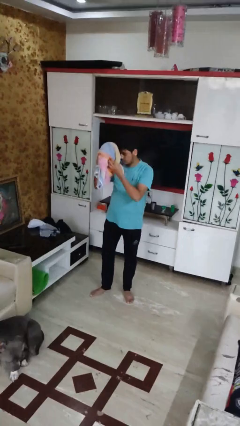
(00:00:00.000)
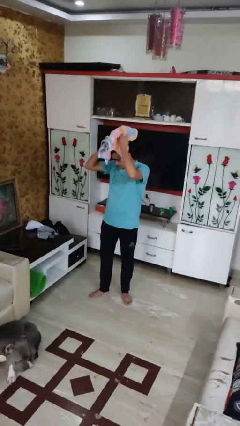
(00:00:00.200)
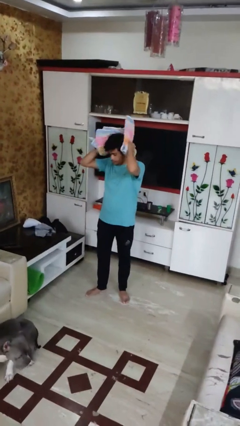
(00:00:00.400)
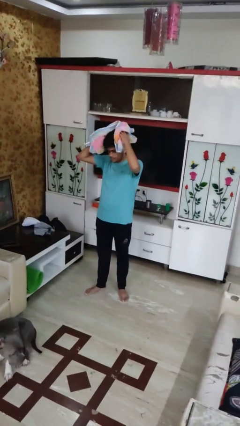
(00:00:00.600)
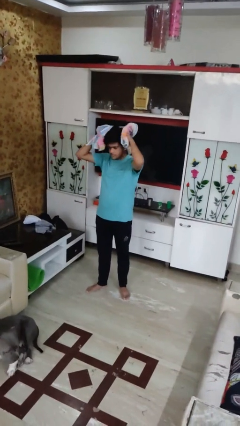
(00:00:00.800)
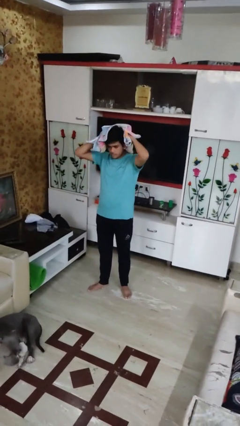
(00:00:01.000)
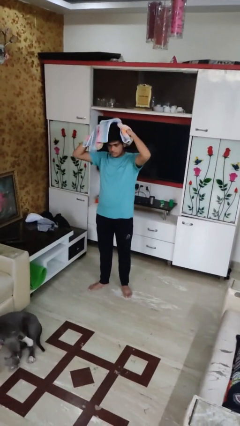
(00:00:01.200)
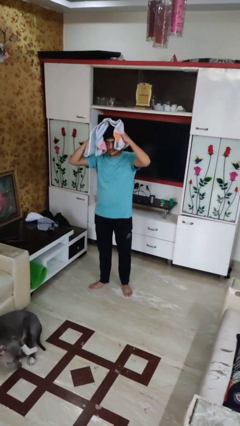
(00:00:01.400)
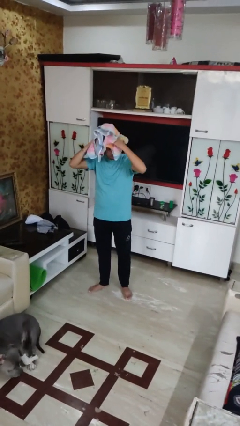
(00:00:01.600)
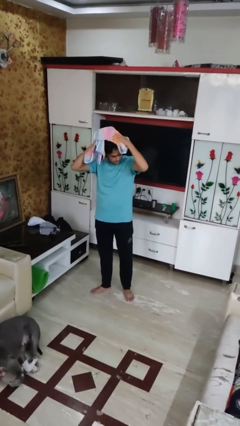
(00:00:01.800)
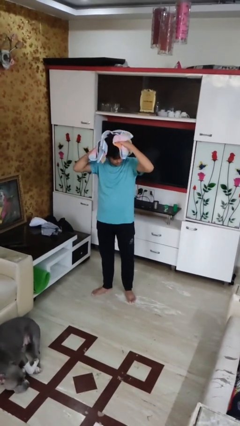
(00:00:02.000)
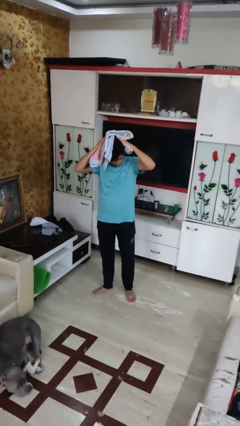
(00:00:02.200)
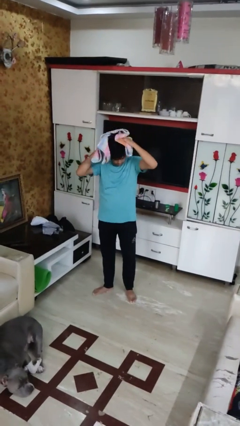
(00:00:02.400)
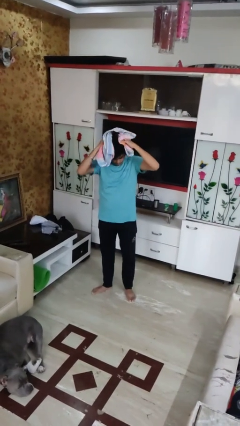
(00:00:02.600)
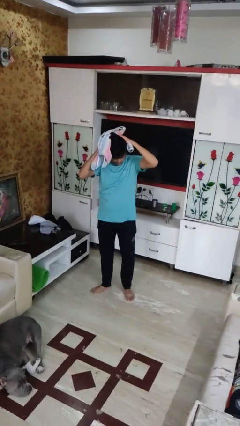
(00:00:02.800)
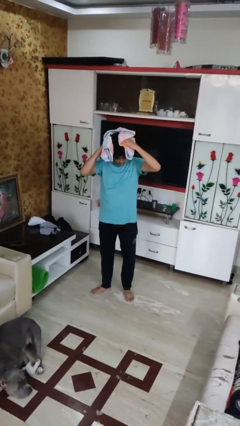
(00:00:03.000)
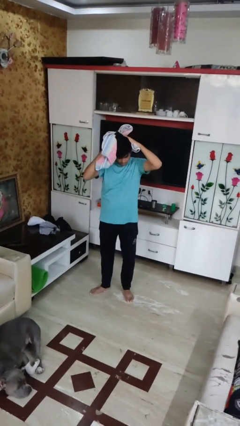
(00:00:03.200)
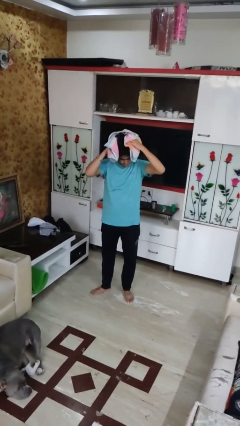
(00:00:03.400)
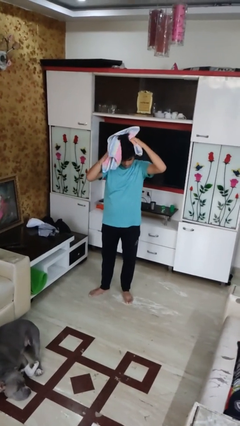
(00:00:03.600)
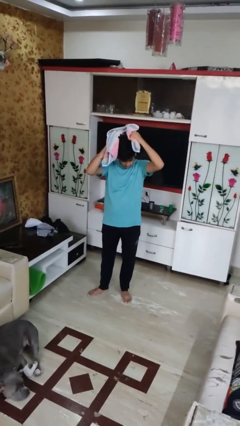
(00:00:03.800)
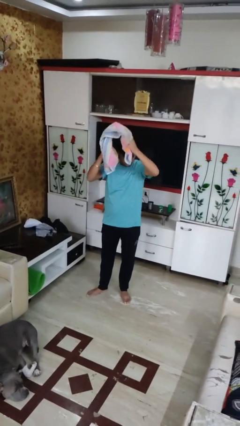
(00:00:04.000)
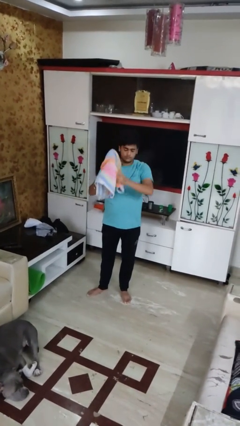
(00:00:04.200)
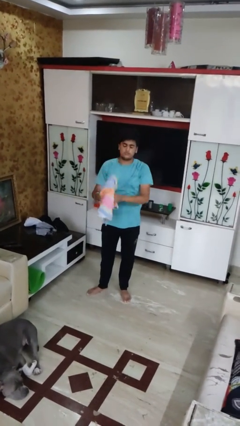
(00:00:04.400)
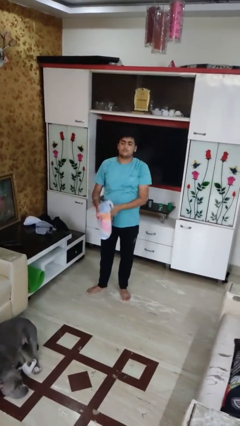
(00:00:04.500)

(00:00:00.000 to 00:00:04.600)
person dries hair with towel

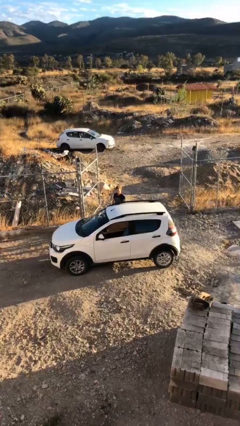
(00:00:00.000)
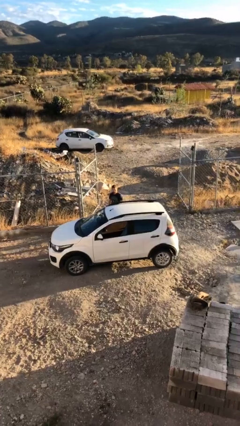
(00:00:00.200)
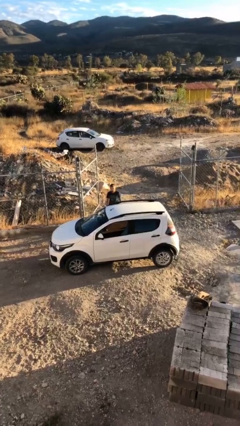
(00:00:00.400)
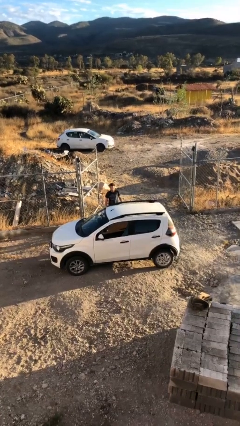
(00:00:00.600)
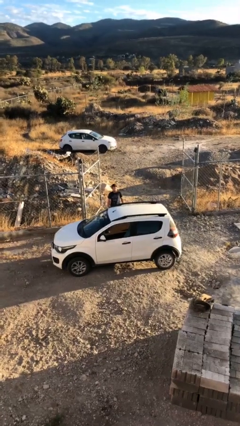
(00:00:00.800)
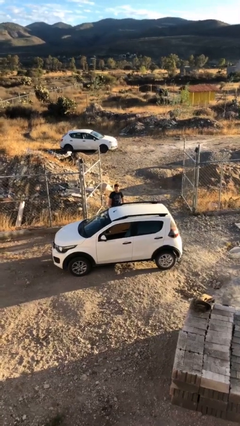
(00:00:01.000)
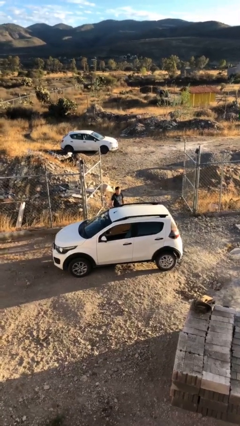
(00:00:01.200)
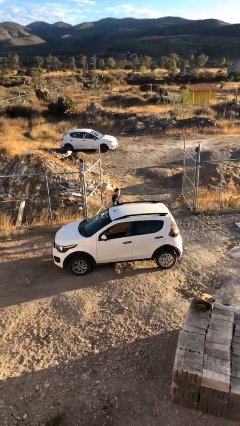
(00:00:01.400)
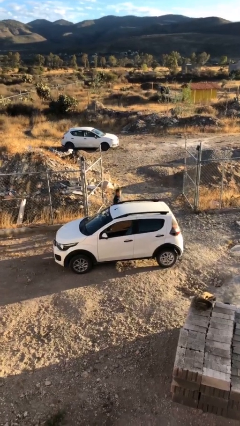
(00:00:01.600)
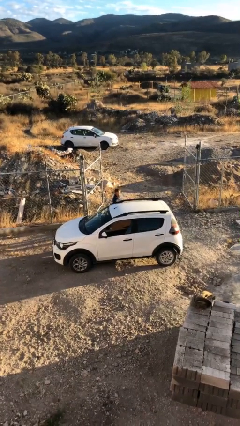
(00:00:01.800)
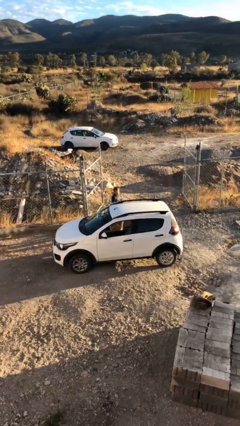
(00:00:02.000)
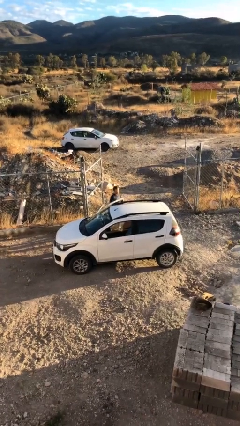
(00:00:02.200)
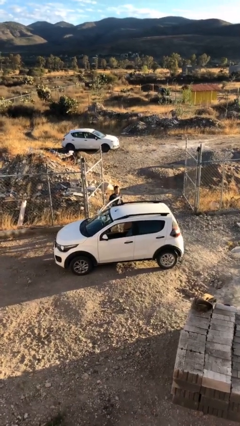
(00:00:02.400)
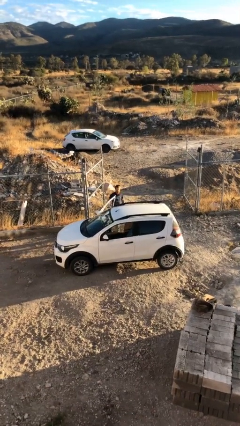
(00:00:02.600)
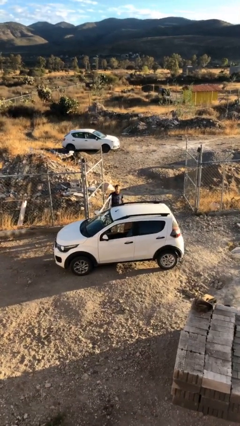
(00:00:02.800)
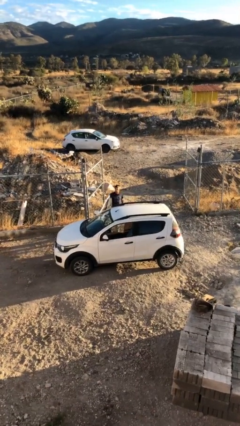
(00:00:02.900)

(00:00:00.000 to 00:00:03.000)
person opens car door

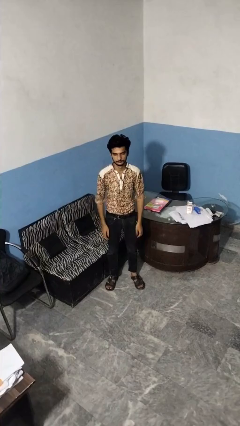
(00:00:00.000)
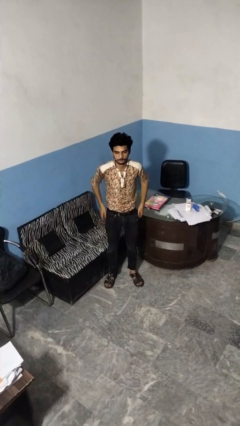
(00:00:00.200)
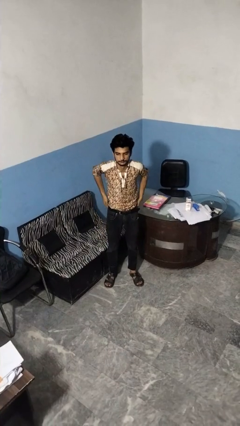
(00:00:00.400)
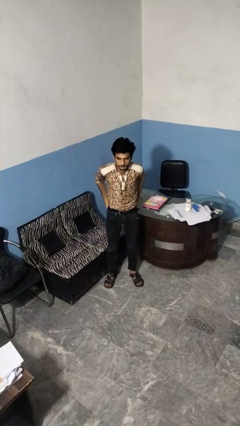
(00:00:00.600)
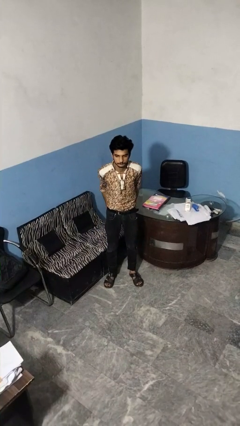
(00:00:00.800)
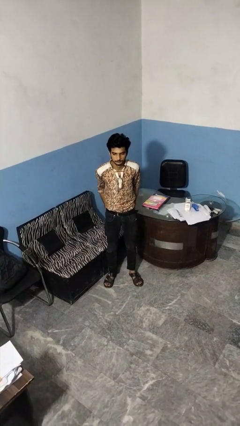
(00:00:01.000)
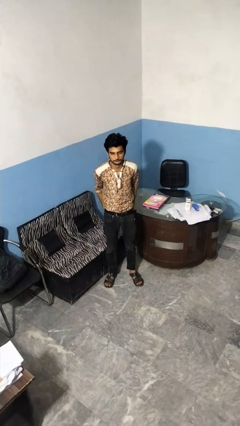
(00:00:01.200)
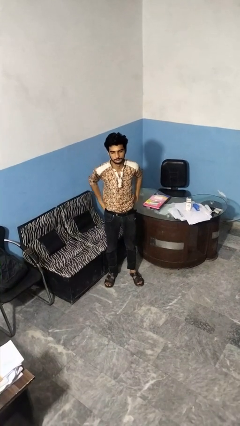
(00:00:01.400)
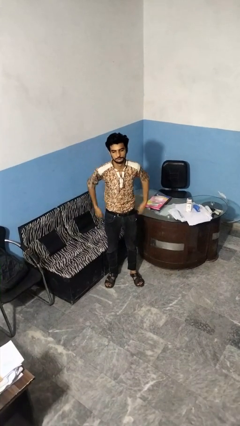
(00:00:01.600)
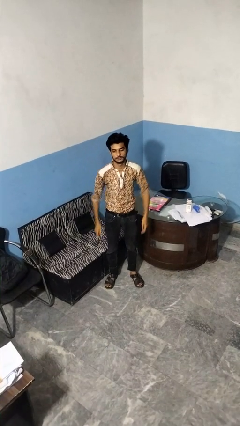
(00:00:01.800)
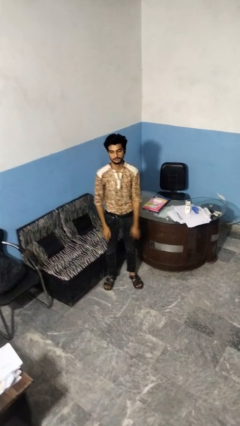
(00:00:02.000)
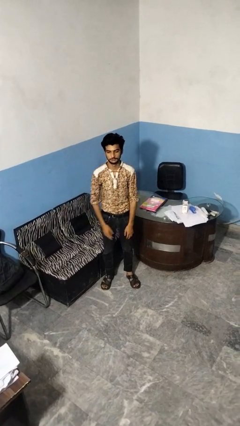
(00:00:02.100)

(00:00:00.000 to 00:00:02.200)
person puts hands in back pockets

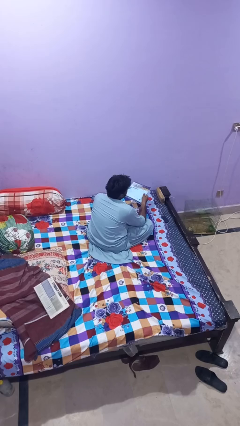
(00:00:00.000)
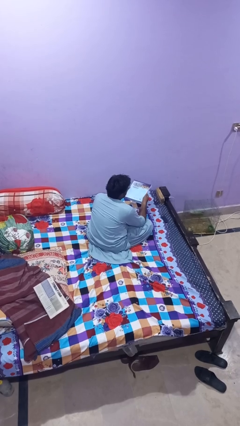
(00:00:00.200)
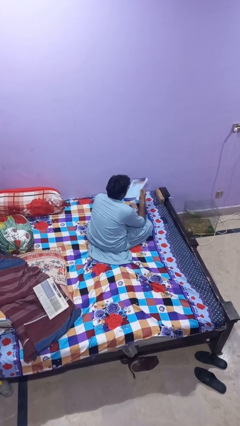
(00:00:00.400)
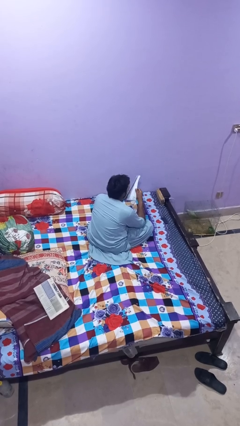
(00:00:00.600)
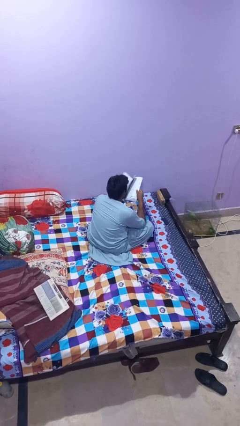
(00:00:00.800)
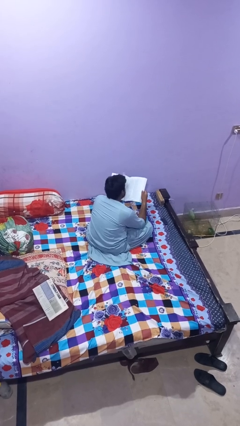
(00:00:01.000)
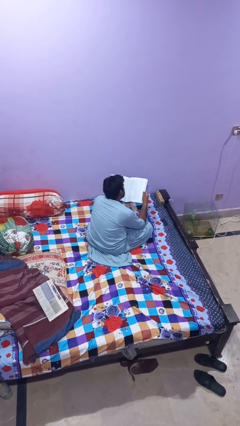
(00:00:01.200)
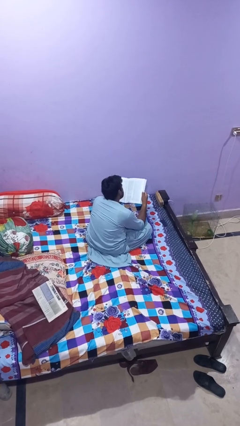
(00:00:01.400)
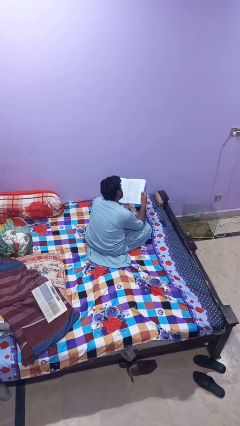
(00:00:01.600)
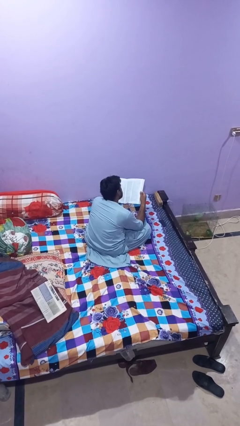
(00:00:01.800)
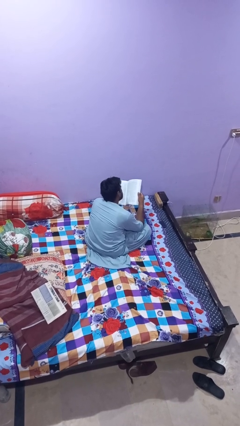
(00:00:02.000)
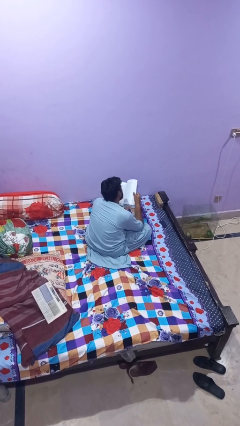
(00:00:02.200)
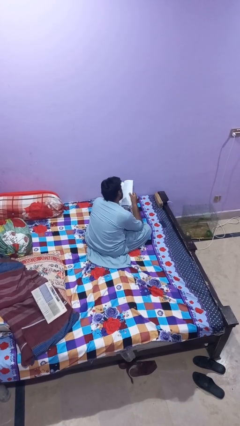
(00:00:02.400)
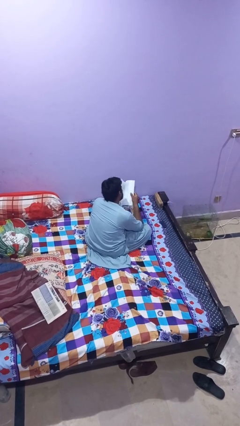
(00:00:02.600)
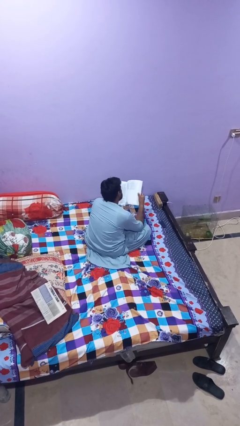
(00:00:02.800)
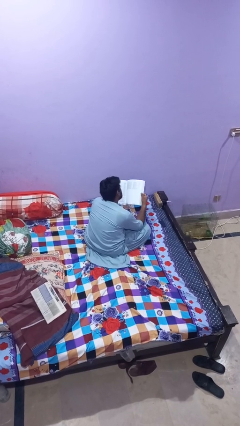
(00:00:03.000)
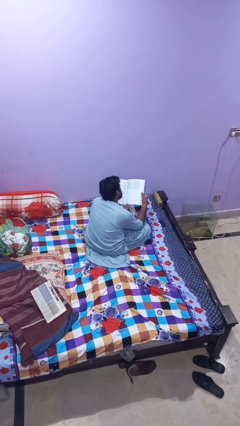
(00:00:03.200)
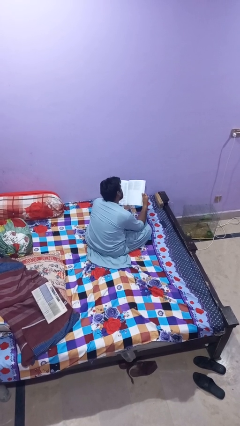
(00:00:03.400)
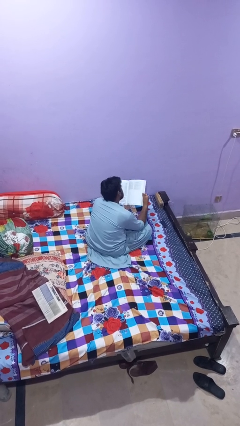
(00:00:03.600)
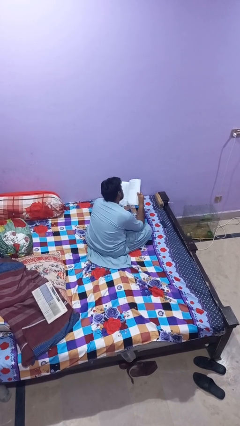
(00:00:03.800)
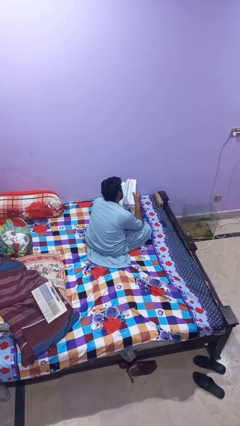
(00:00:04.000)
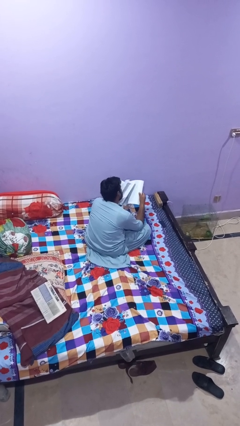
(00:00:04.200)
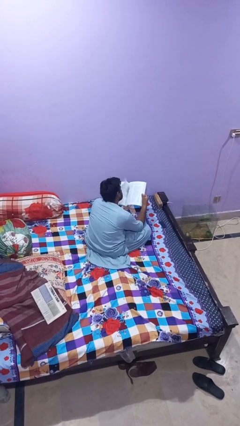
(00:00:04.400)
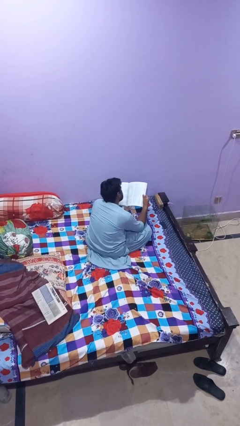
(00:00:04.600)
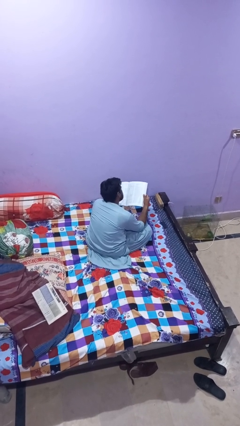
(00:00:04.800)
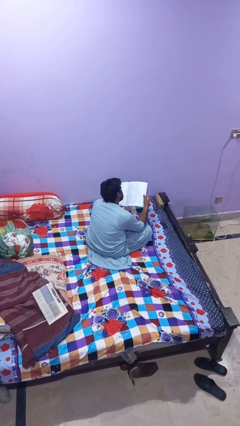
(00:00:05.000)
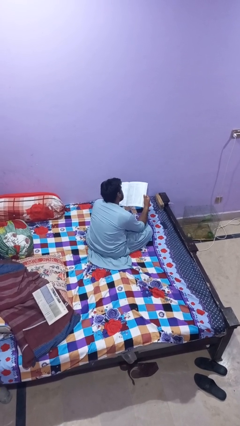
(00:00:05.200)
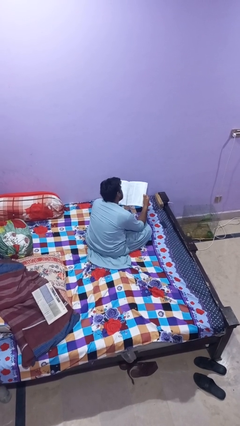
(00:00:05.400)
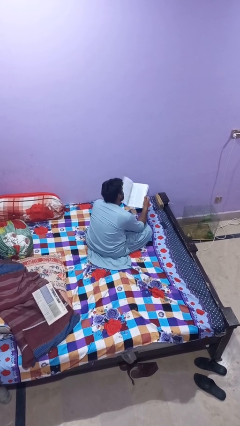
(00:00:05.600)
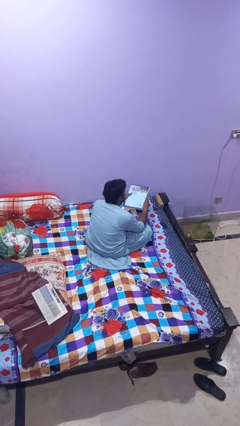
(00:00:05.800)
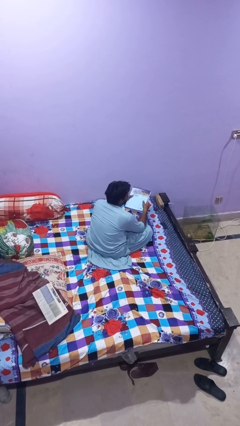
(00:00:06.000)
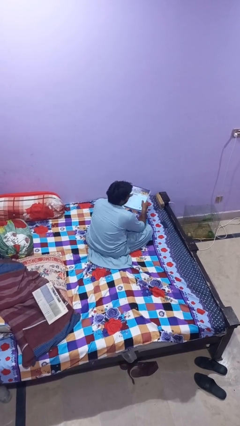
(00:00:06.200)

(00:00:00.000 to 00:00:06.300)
person reads magazine

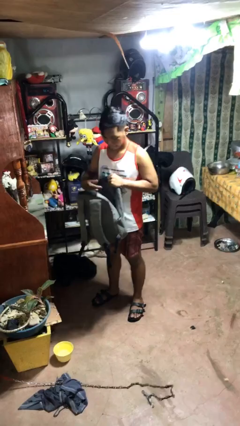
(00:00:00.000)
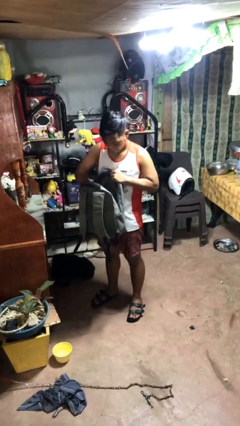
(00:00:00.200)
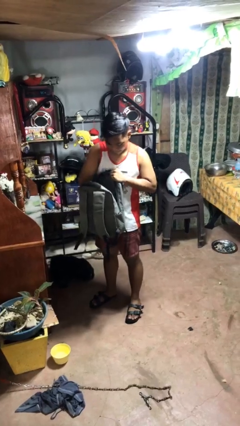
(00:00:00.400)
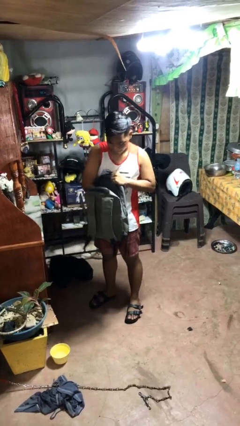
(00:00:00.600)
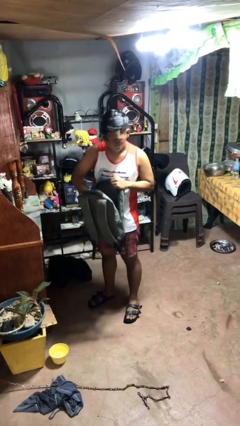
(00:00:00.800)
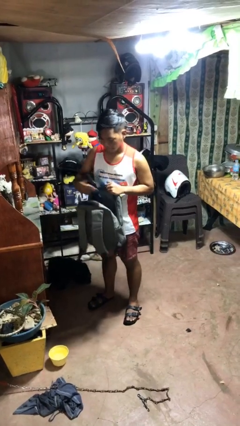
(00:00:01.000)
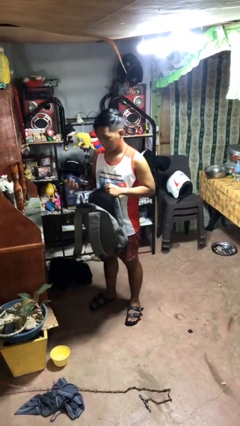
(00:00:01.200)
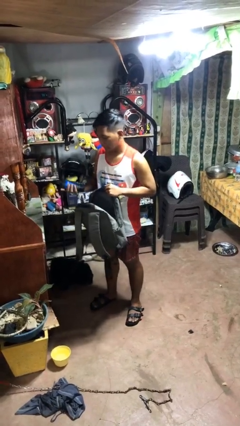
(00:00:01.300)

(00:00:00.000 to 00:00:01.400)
person takes object from bag
